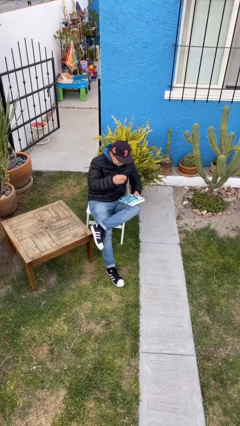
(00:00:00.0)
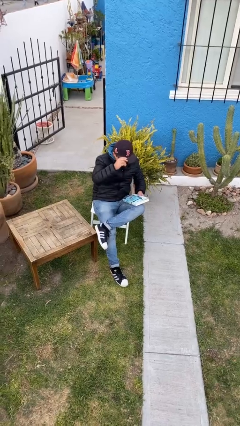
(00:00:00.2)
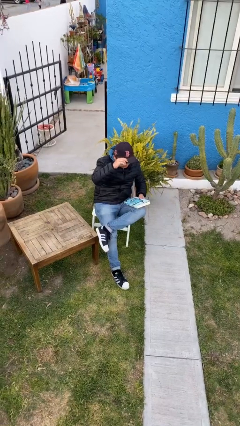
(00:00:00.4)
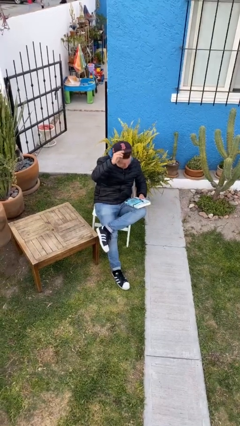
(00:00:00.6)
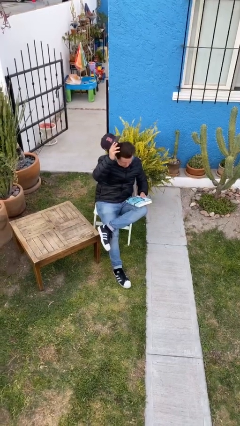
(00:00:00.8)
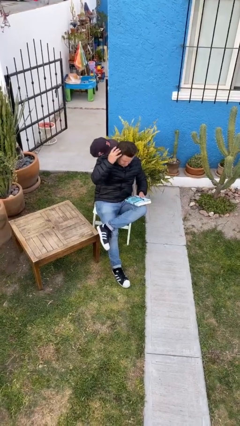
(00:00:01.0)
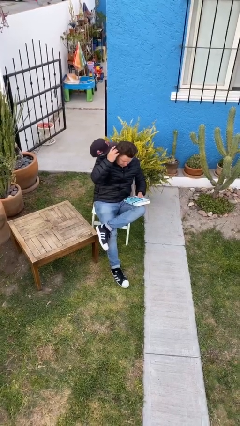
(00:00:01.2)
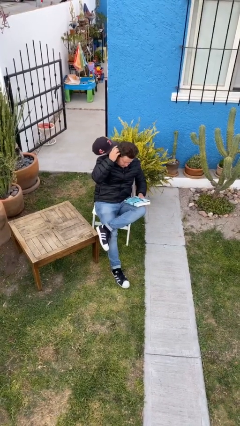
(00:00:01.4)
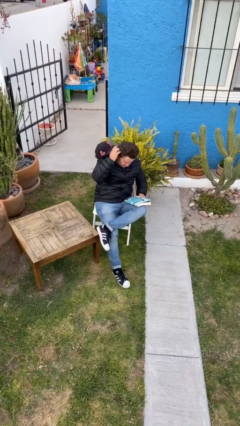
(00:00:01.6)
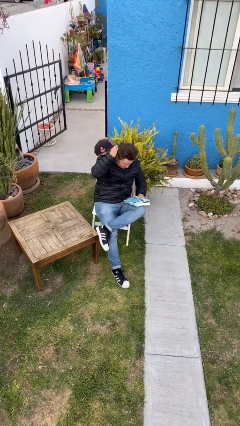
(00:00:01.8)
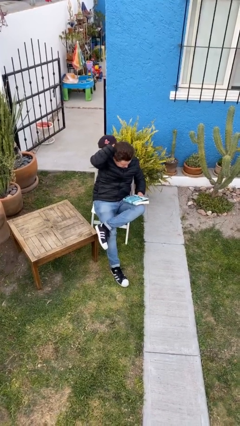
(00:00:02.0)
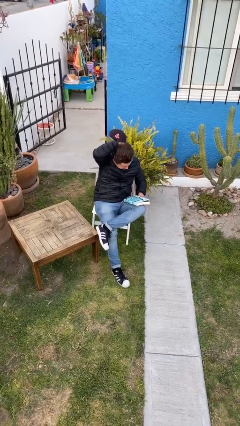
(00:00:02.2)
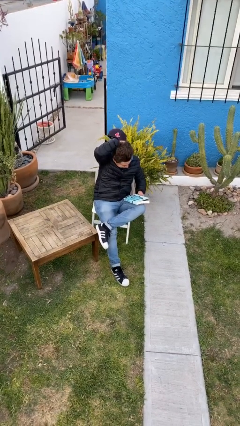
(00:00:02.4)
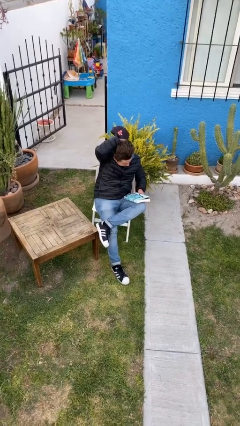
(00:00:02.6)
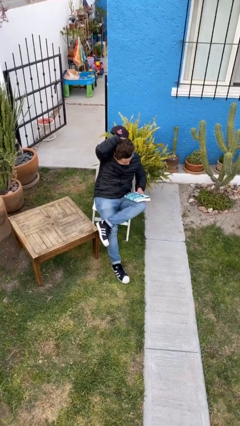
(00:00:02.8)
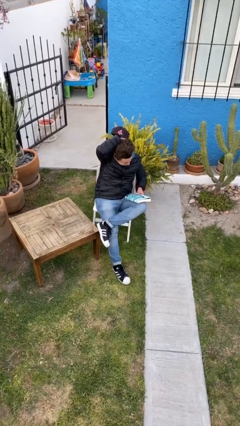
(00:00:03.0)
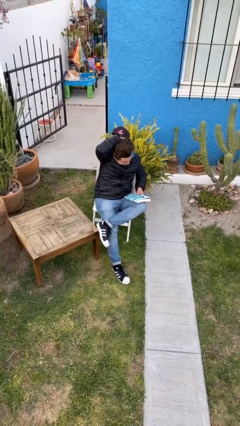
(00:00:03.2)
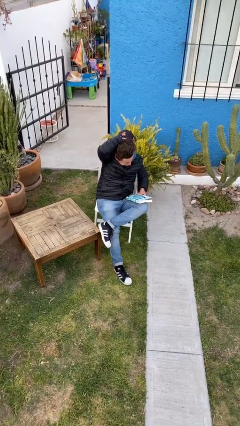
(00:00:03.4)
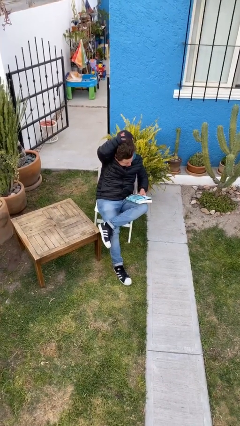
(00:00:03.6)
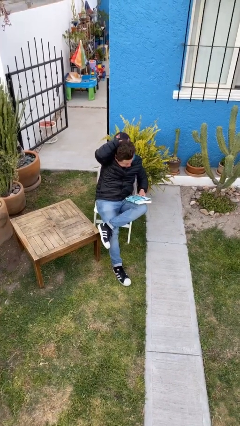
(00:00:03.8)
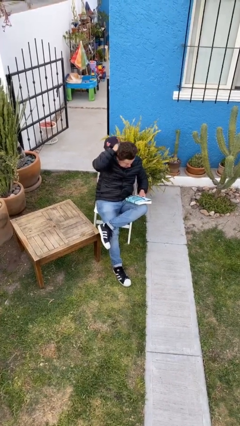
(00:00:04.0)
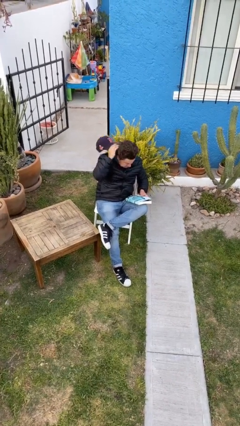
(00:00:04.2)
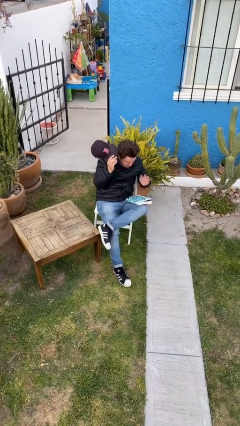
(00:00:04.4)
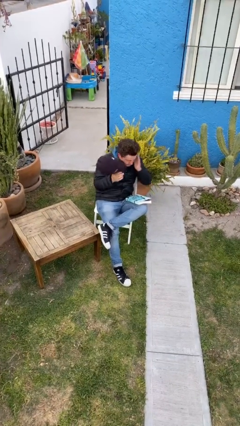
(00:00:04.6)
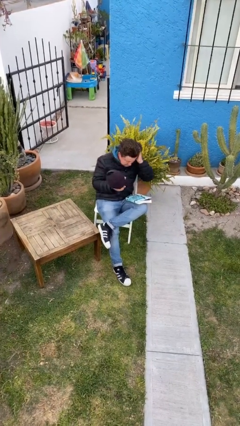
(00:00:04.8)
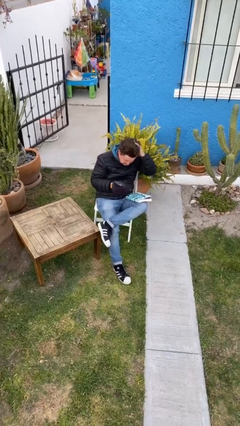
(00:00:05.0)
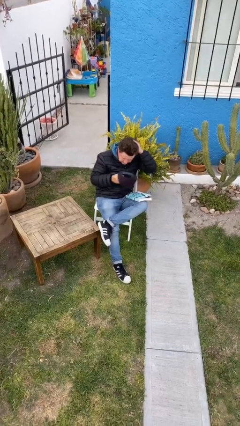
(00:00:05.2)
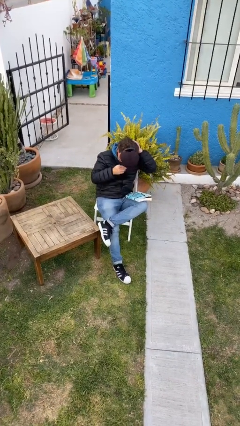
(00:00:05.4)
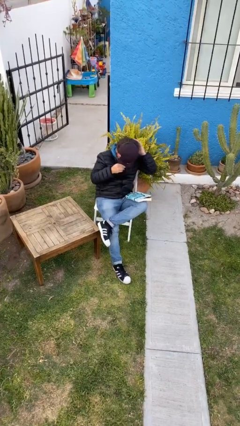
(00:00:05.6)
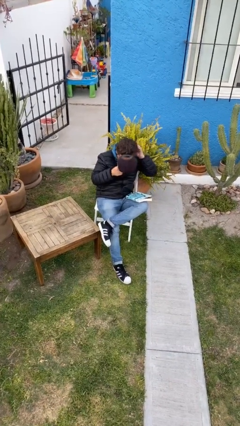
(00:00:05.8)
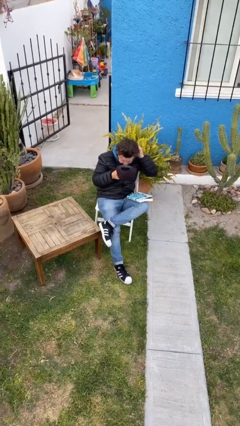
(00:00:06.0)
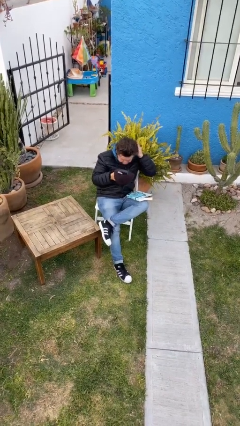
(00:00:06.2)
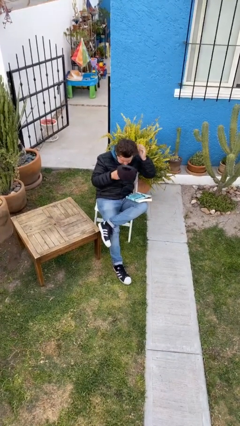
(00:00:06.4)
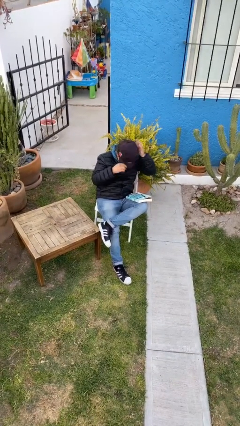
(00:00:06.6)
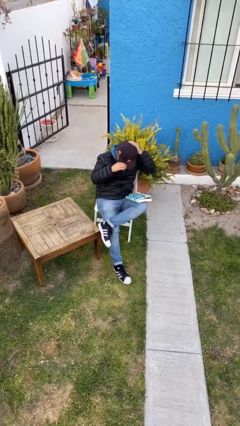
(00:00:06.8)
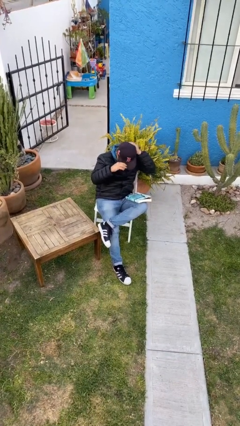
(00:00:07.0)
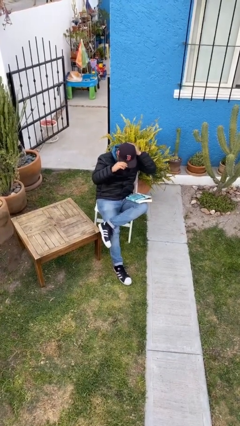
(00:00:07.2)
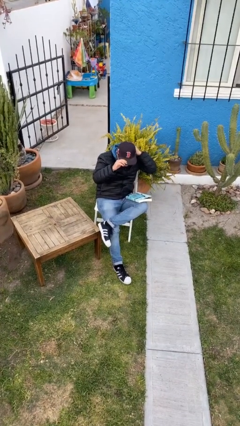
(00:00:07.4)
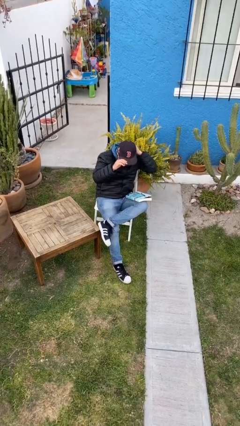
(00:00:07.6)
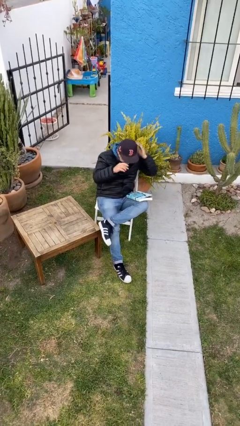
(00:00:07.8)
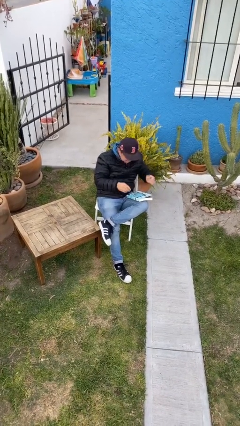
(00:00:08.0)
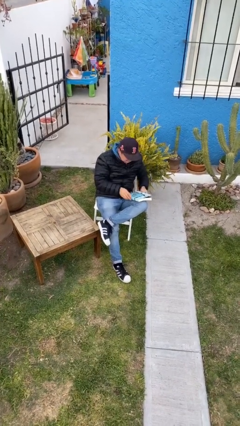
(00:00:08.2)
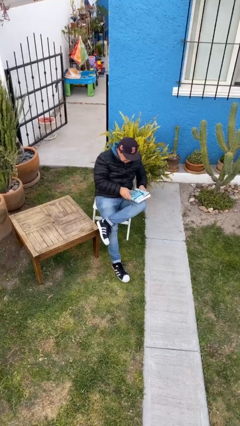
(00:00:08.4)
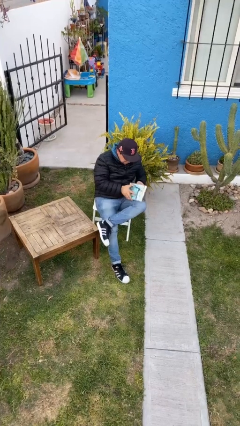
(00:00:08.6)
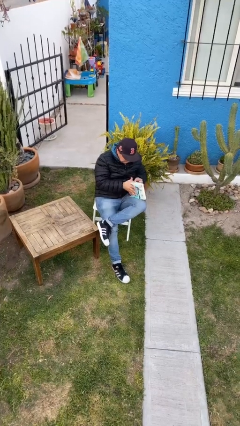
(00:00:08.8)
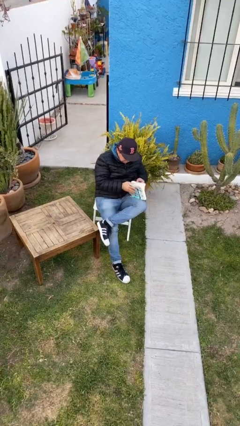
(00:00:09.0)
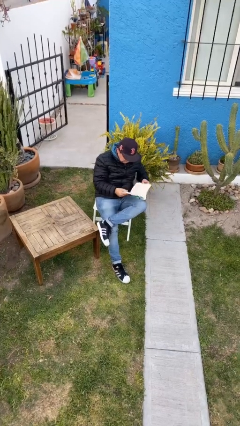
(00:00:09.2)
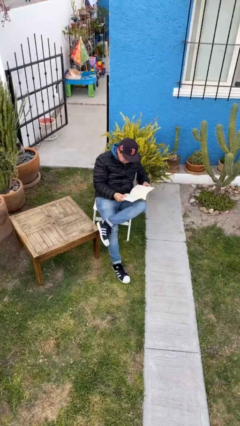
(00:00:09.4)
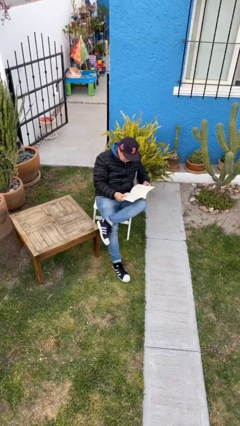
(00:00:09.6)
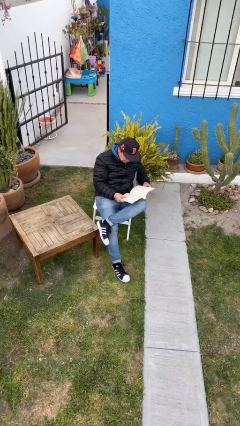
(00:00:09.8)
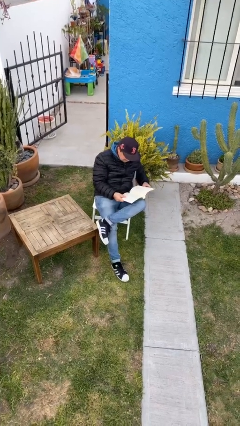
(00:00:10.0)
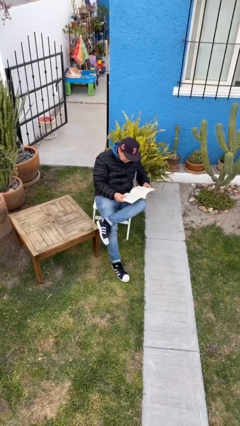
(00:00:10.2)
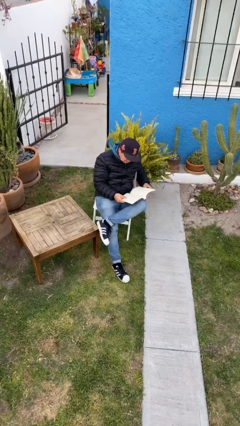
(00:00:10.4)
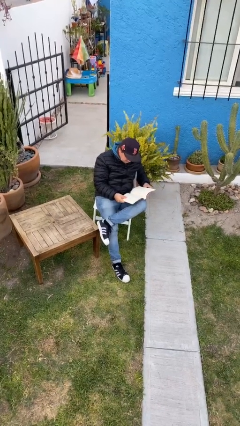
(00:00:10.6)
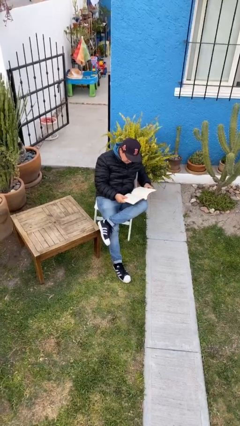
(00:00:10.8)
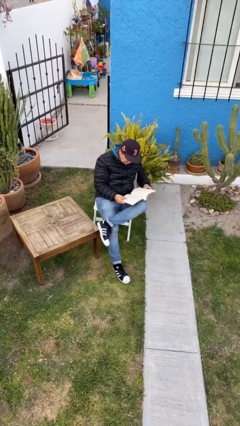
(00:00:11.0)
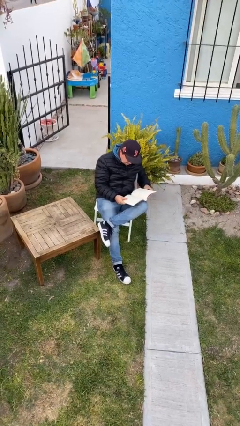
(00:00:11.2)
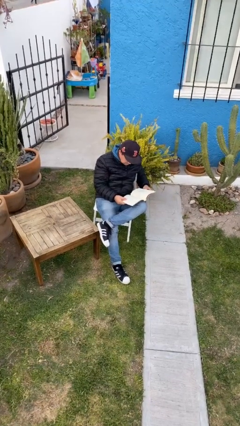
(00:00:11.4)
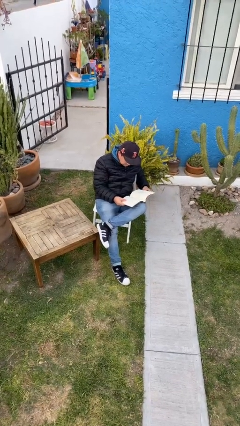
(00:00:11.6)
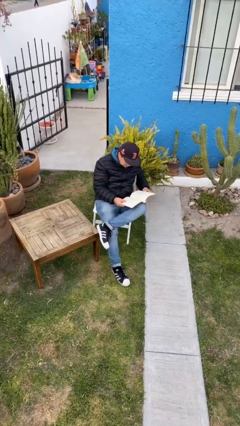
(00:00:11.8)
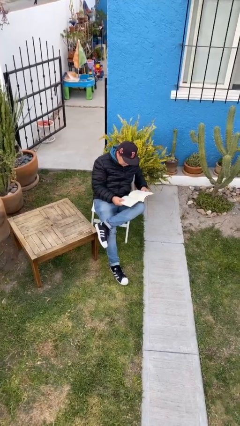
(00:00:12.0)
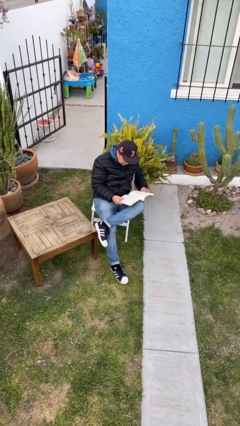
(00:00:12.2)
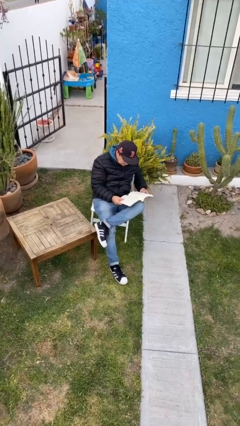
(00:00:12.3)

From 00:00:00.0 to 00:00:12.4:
person reads document

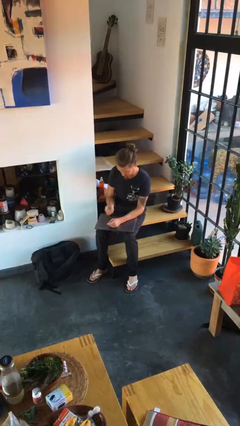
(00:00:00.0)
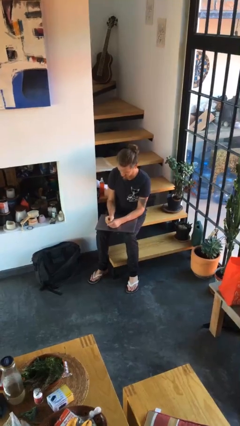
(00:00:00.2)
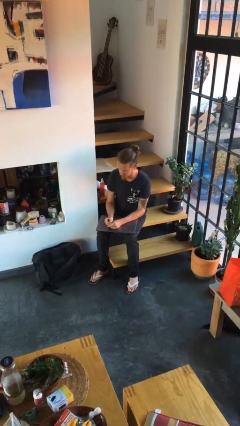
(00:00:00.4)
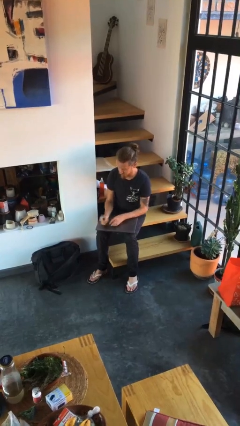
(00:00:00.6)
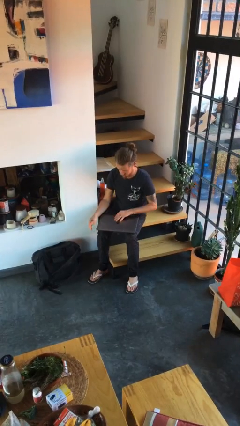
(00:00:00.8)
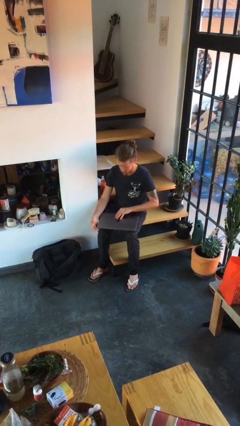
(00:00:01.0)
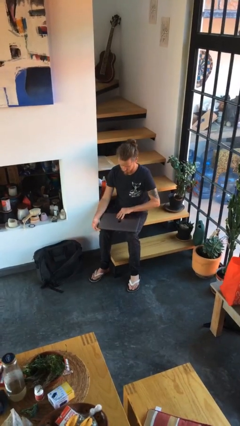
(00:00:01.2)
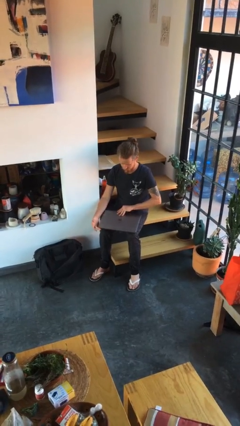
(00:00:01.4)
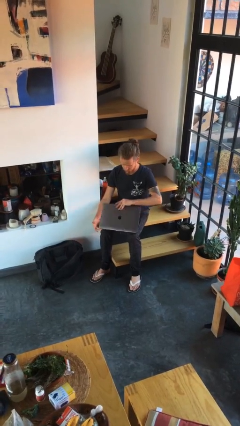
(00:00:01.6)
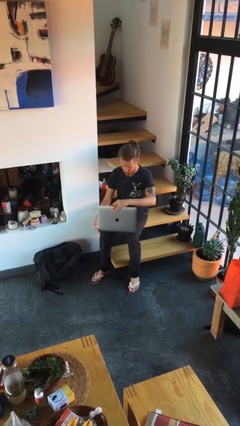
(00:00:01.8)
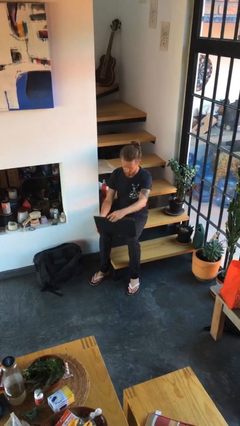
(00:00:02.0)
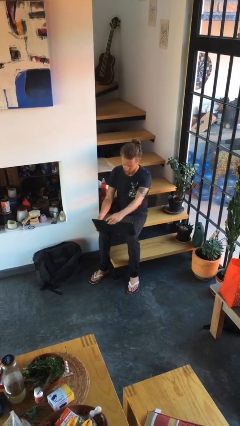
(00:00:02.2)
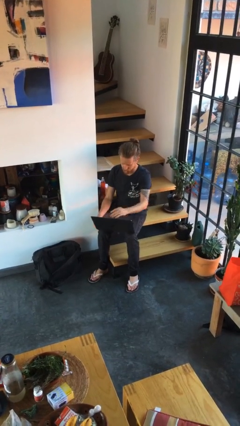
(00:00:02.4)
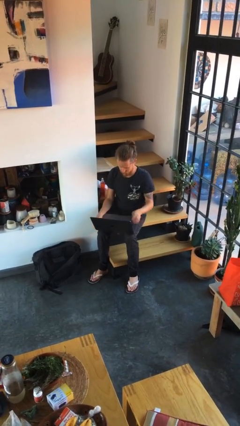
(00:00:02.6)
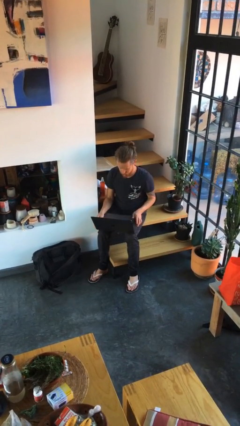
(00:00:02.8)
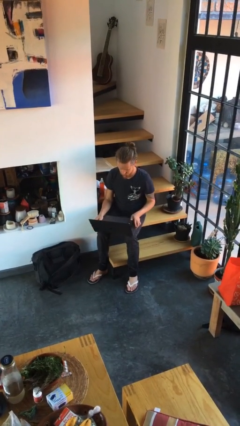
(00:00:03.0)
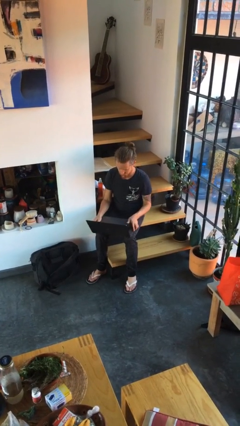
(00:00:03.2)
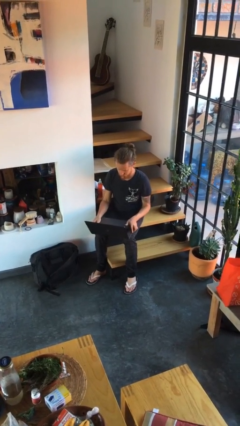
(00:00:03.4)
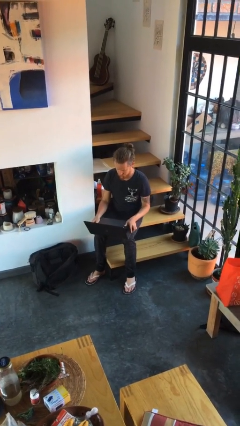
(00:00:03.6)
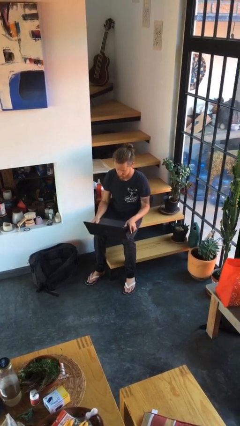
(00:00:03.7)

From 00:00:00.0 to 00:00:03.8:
person opens laptop

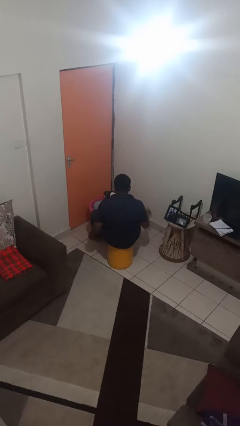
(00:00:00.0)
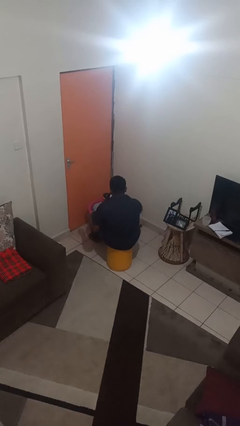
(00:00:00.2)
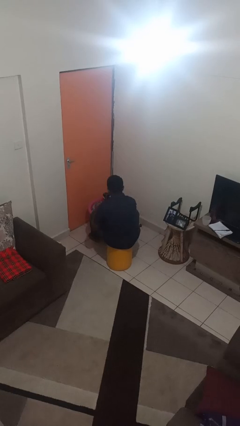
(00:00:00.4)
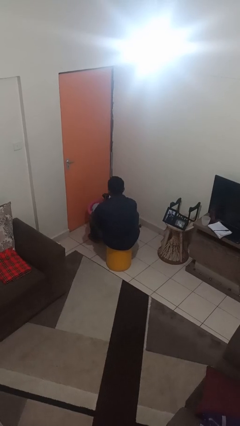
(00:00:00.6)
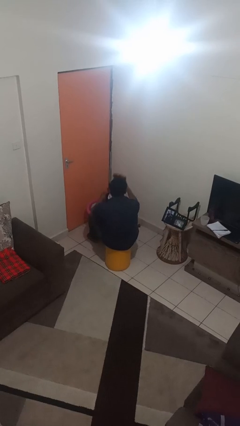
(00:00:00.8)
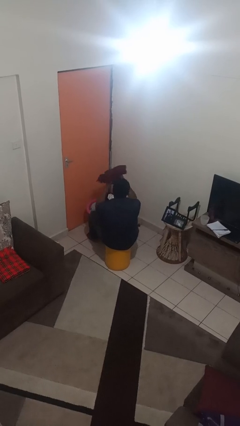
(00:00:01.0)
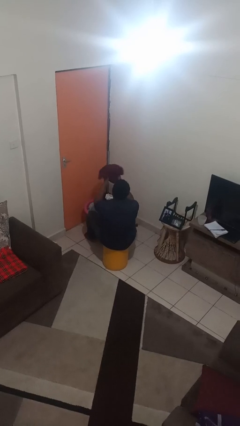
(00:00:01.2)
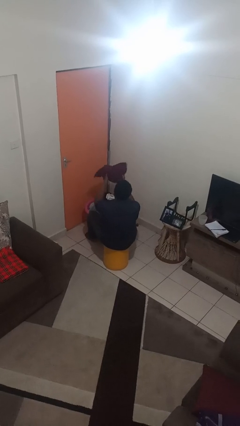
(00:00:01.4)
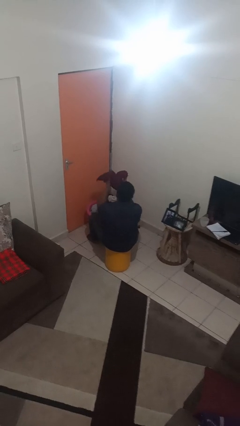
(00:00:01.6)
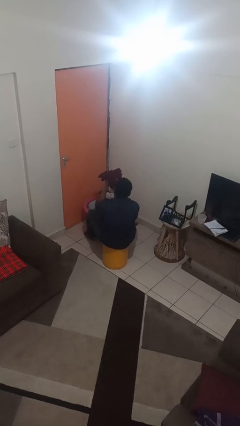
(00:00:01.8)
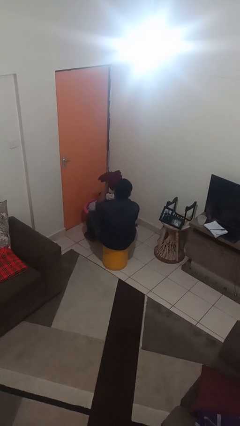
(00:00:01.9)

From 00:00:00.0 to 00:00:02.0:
person takes object from basket
